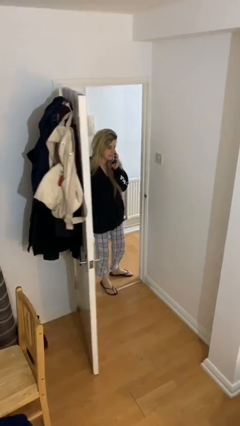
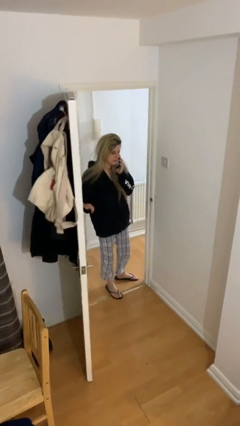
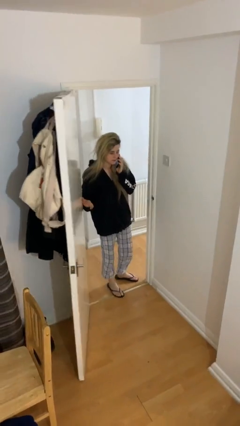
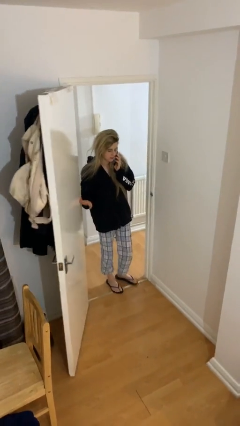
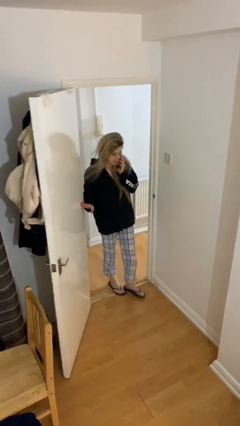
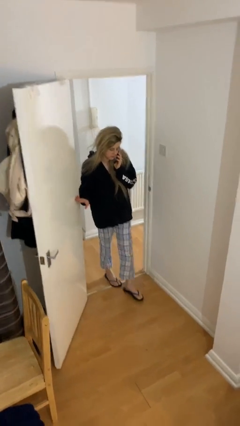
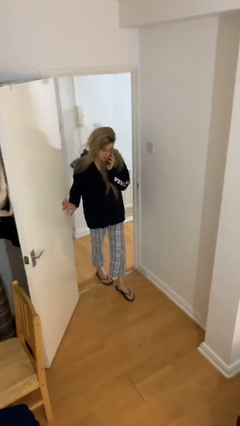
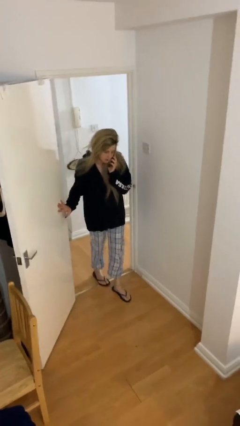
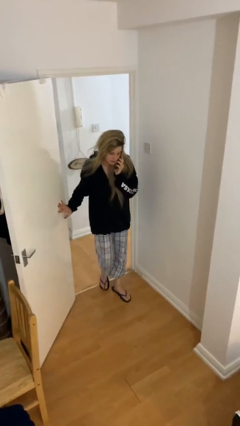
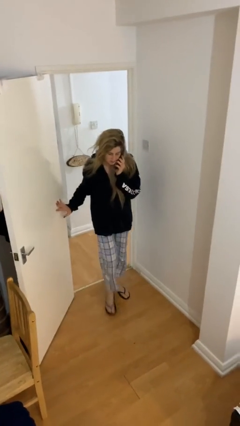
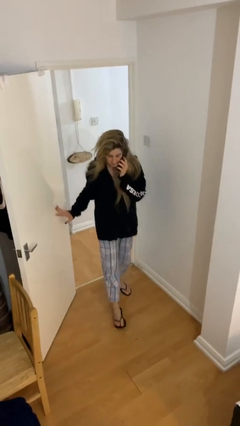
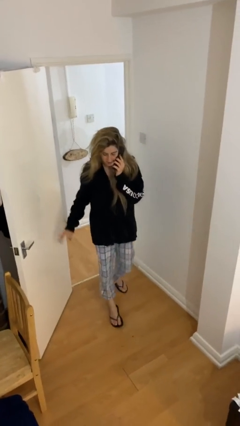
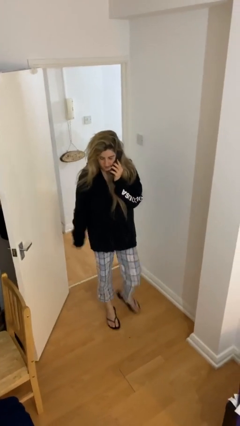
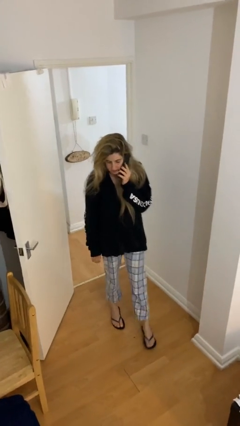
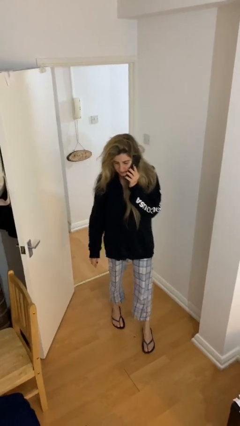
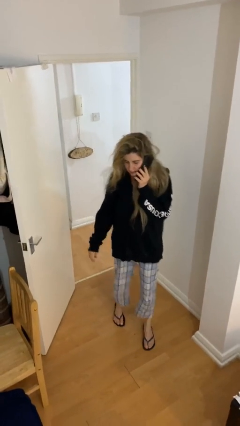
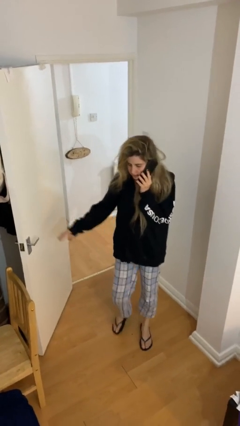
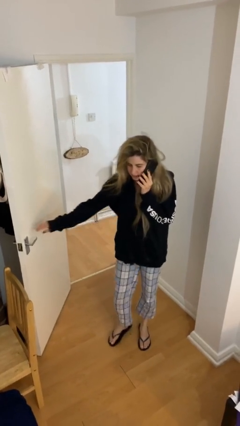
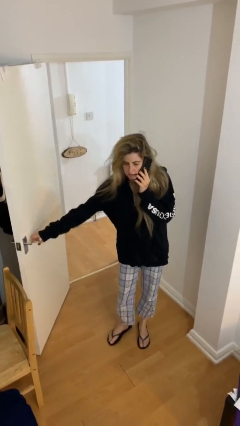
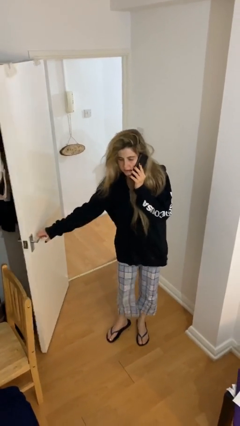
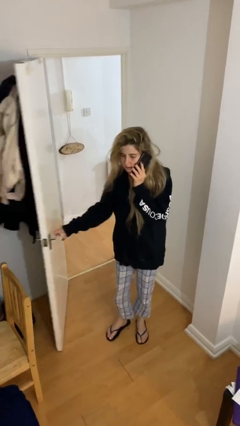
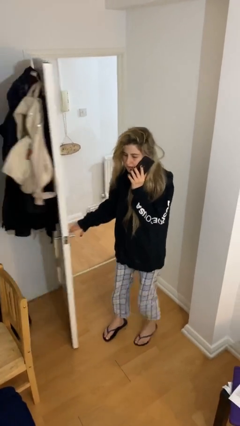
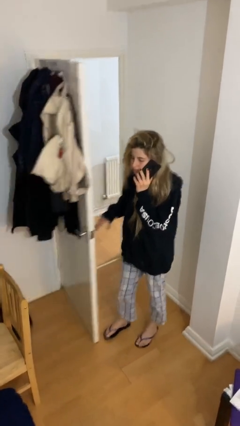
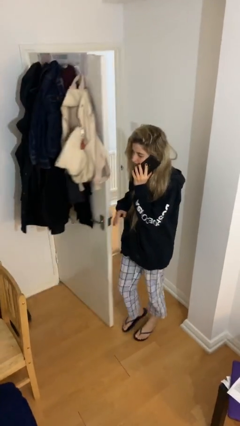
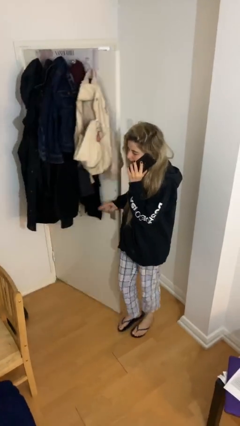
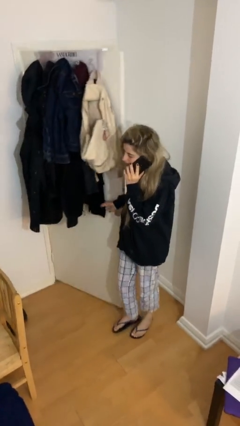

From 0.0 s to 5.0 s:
person enters scene through structure

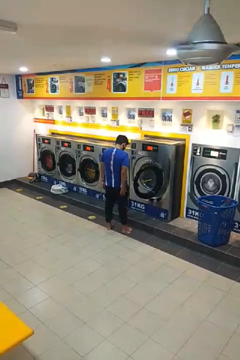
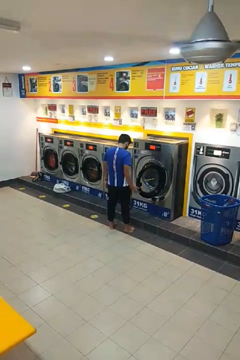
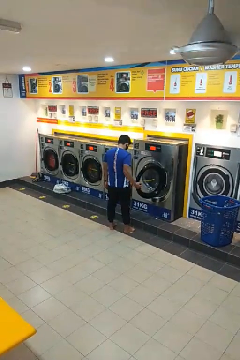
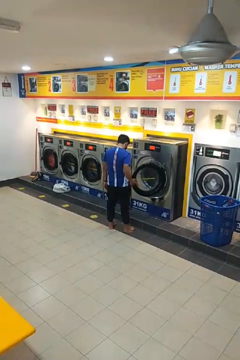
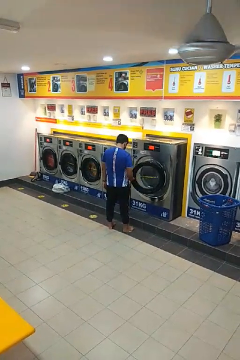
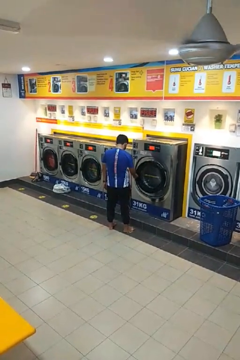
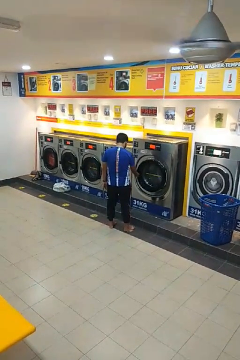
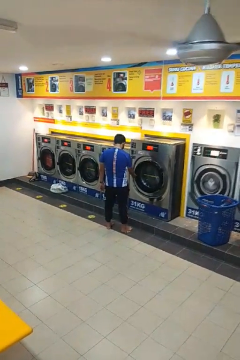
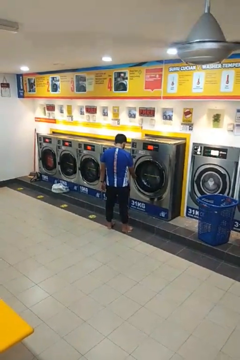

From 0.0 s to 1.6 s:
person closes clothes washer

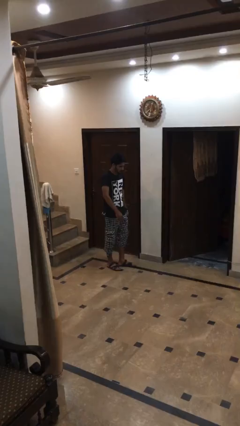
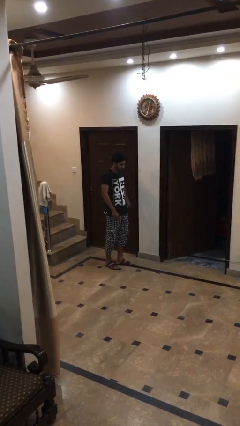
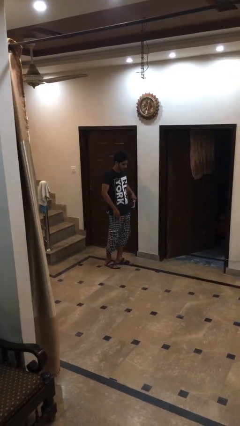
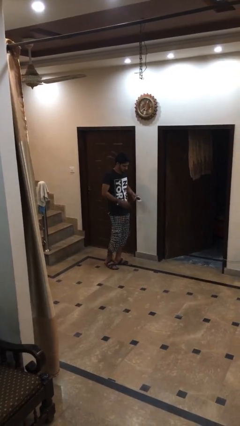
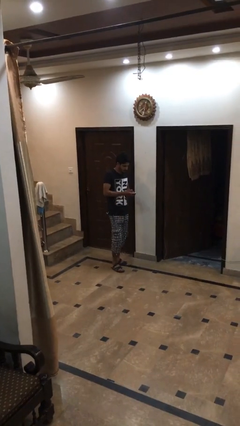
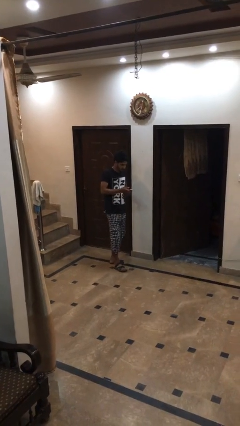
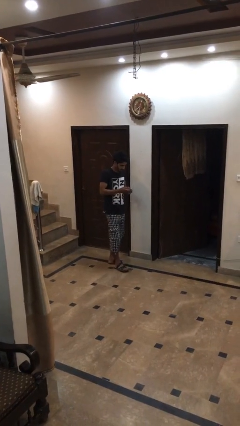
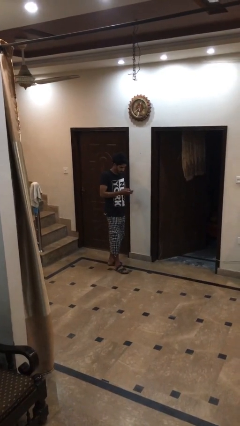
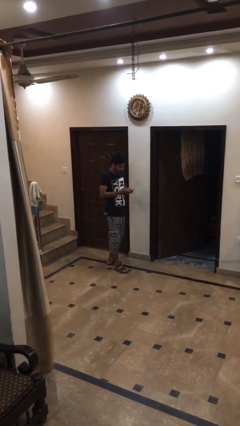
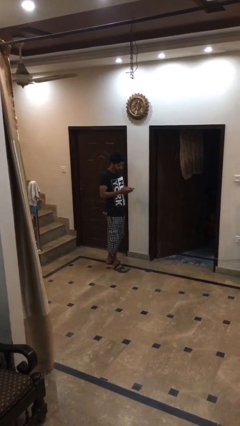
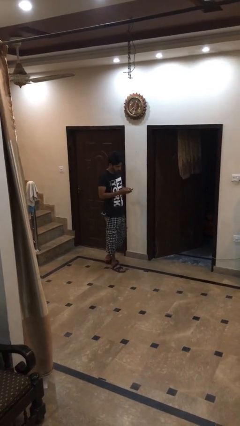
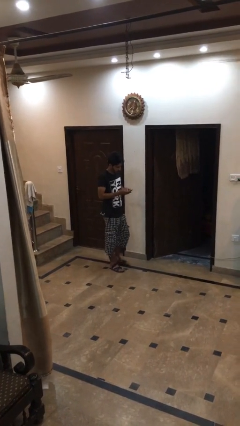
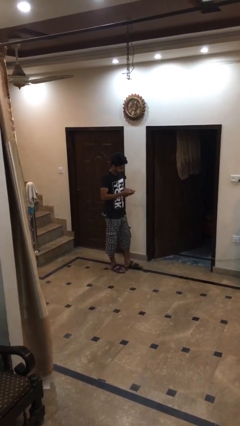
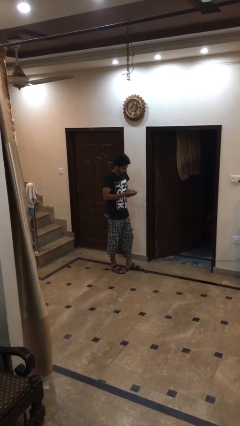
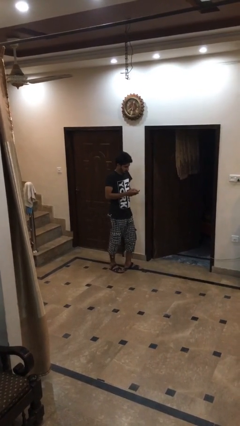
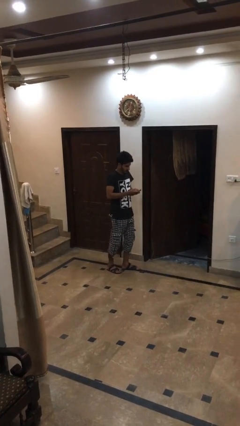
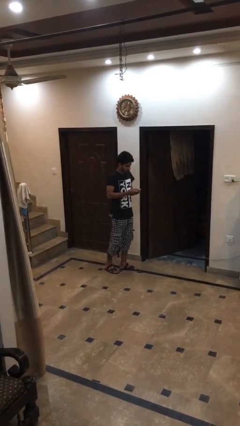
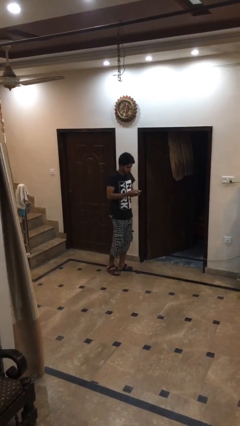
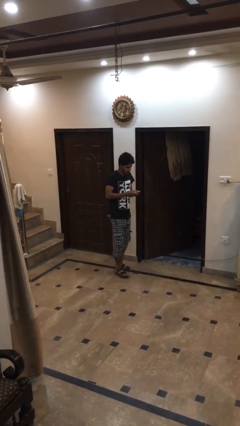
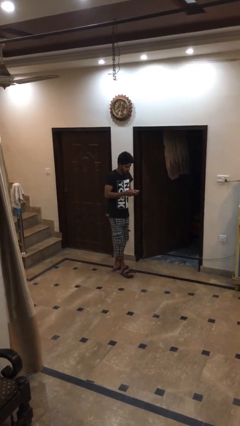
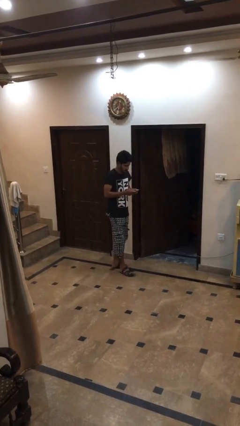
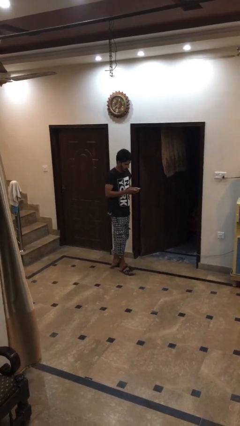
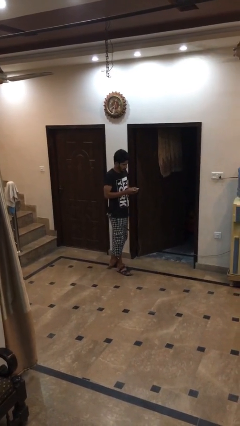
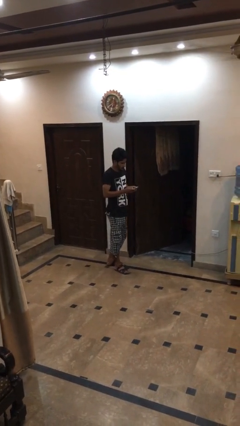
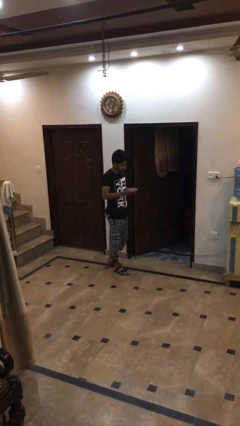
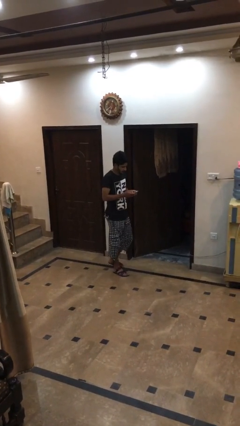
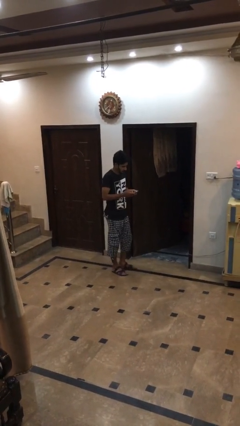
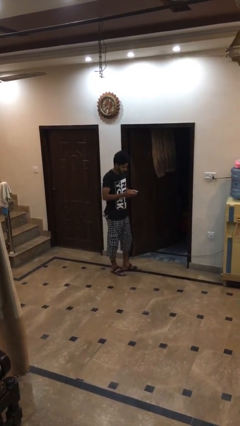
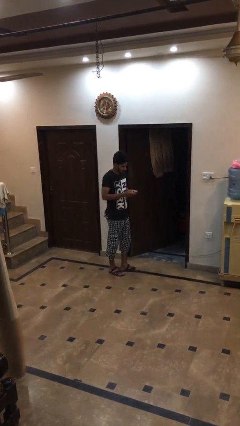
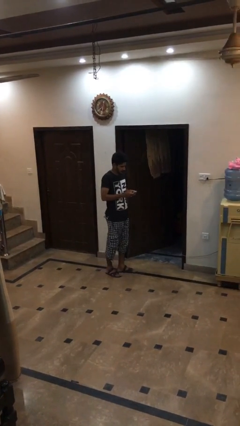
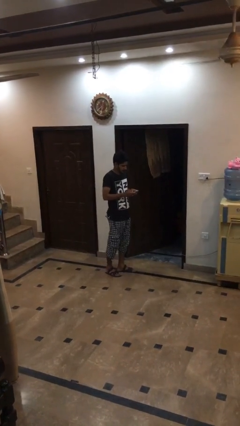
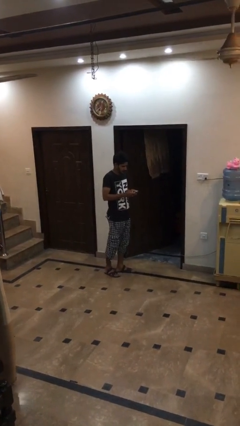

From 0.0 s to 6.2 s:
person texts on phone

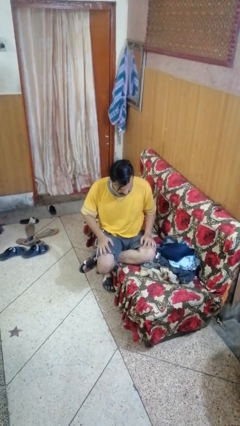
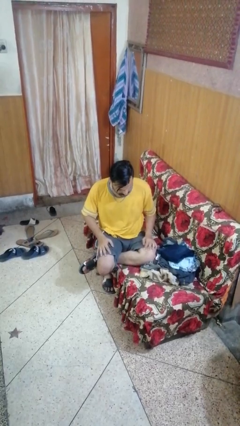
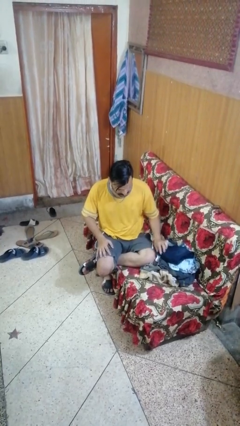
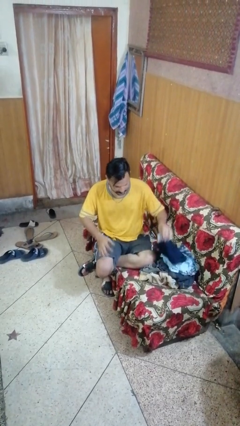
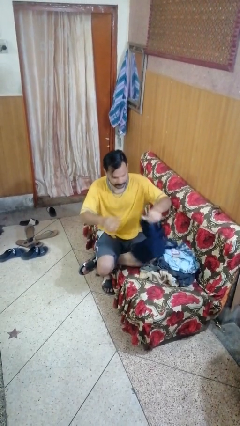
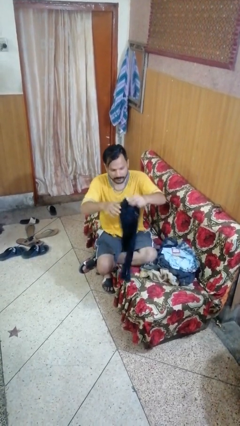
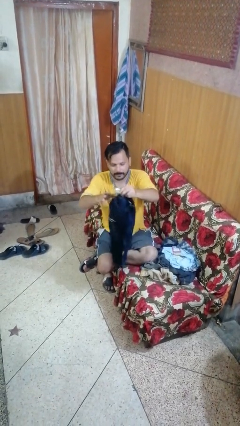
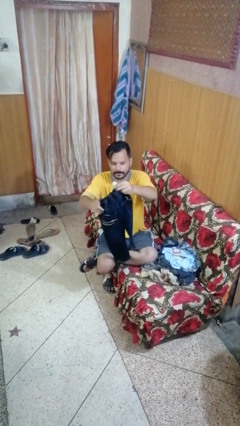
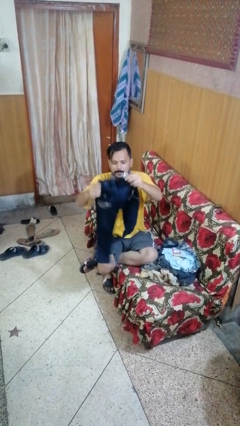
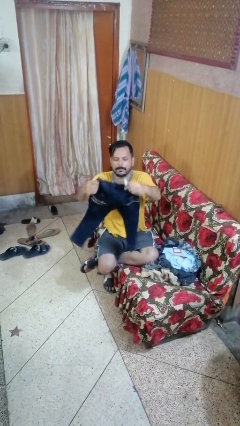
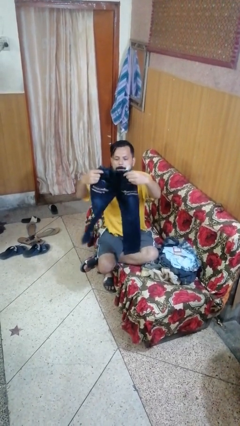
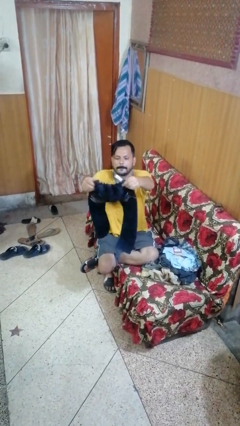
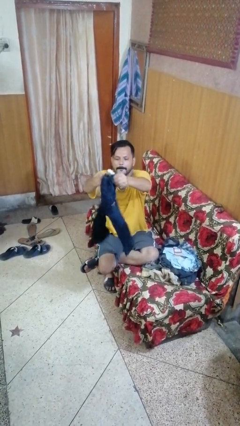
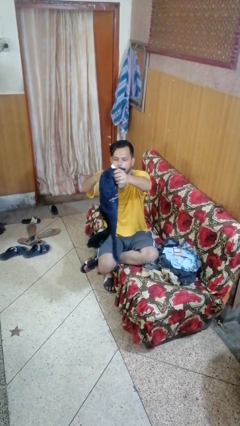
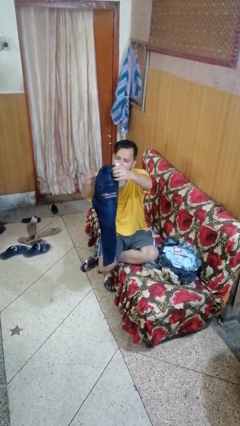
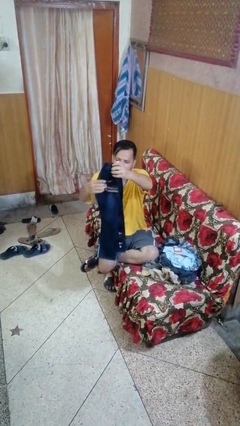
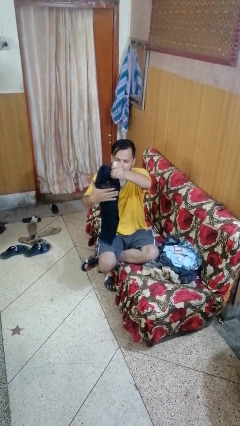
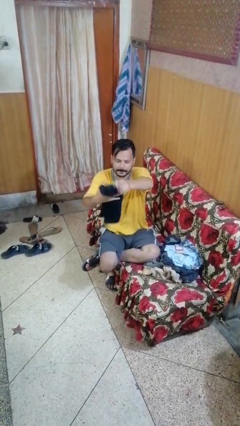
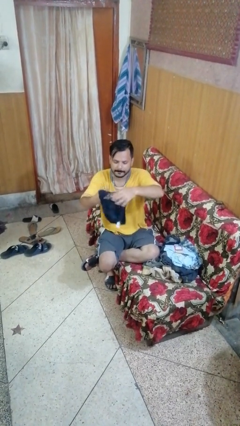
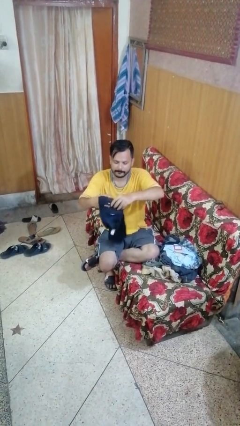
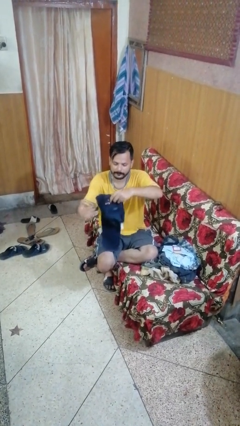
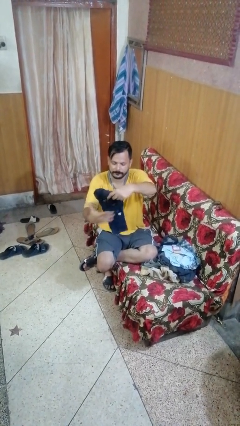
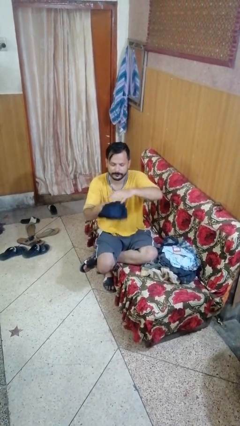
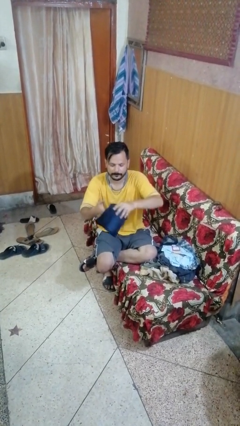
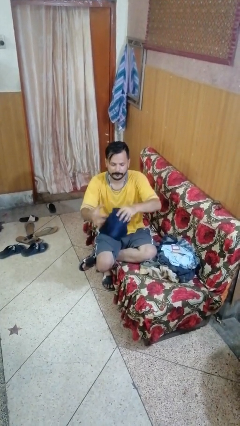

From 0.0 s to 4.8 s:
person folds pants

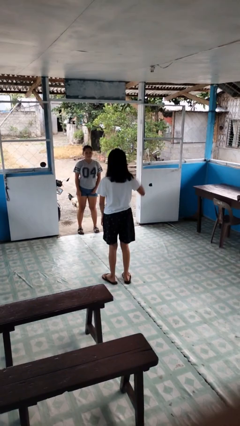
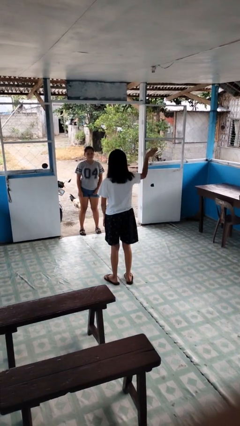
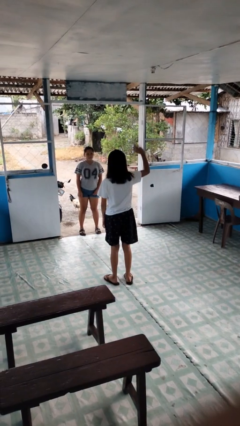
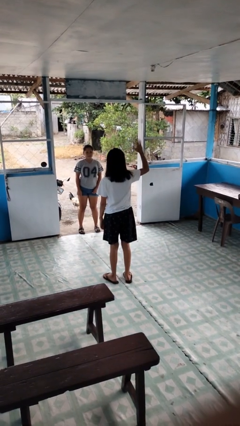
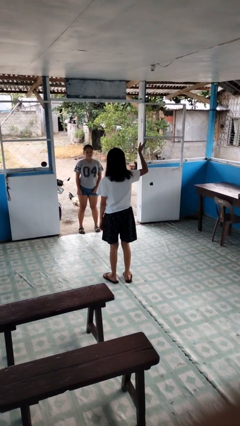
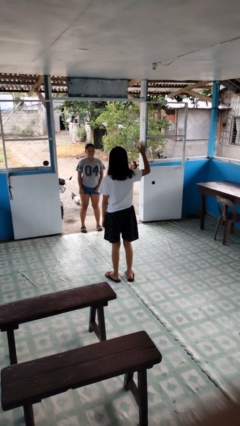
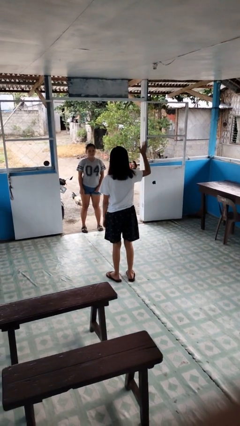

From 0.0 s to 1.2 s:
person waves at person
